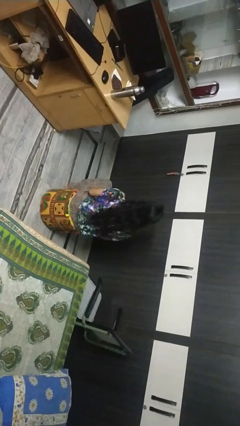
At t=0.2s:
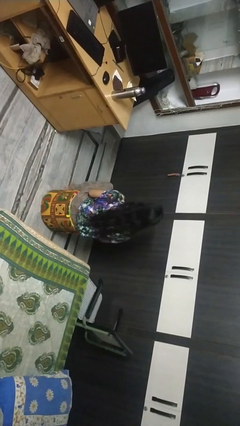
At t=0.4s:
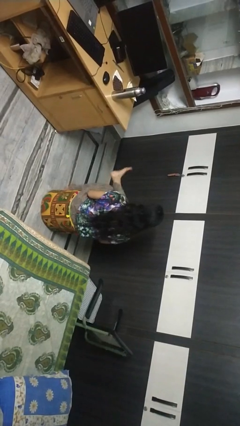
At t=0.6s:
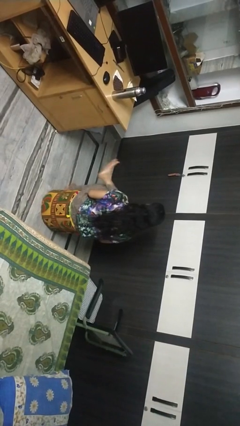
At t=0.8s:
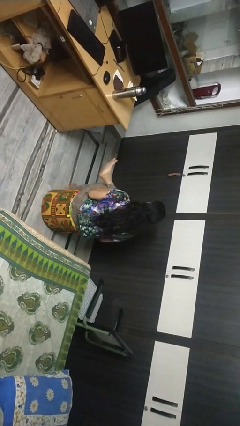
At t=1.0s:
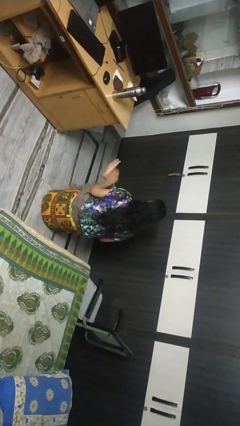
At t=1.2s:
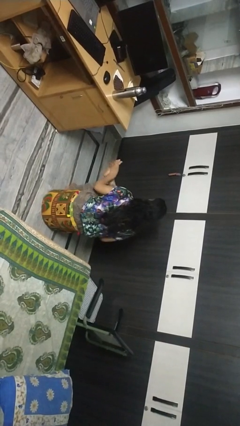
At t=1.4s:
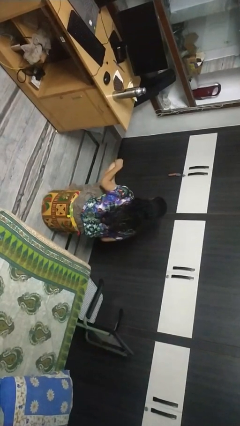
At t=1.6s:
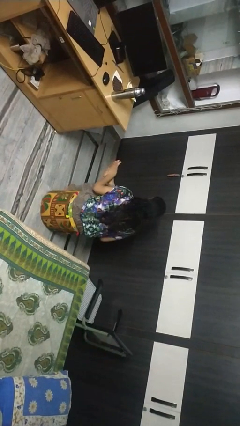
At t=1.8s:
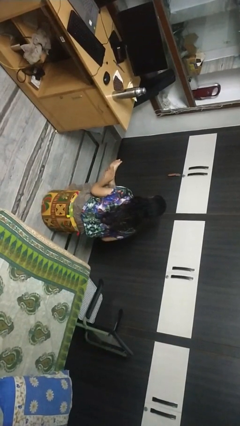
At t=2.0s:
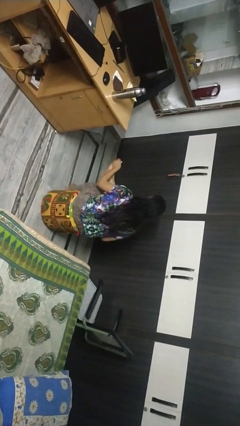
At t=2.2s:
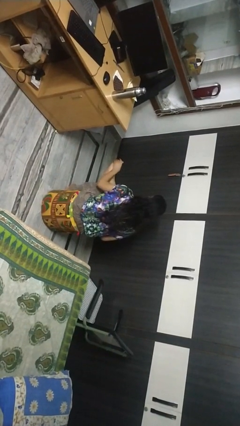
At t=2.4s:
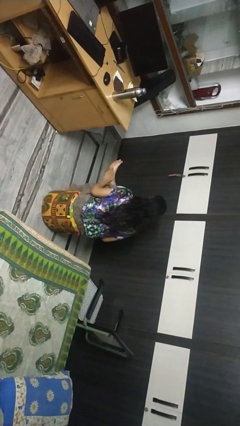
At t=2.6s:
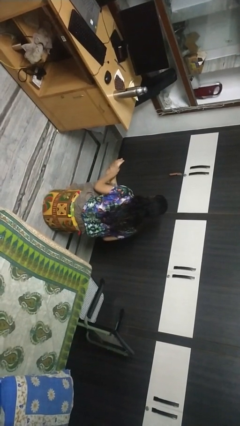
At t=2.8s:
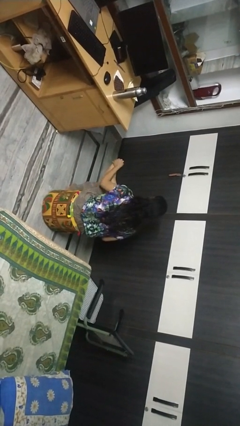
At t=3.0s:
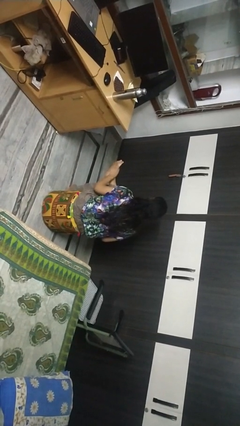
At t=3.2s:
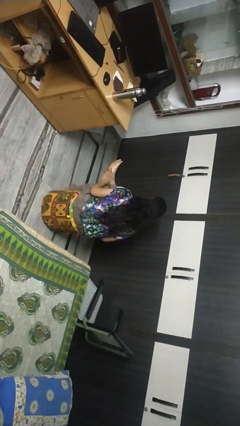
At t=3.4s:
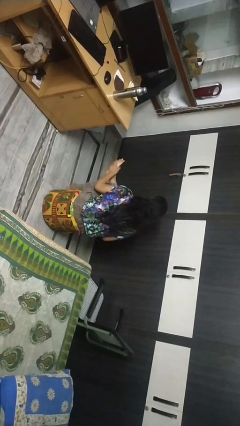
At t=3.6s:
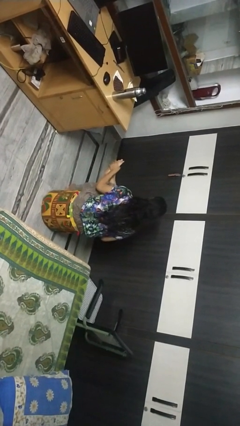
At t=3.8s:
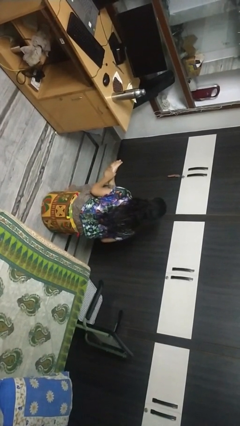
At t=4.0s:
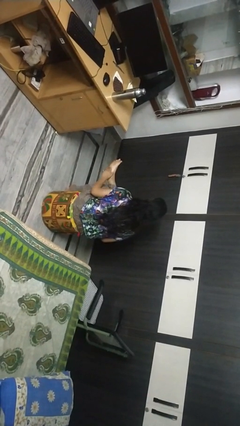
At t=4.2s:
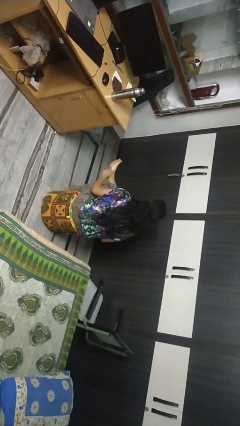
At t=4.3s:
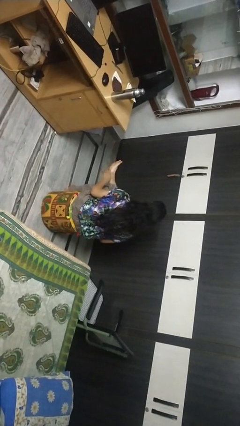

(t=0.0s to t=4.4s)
person rubs foot

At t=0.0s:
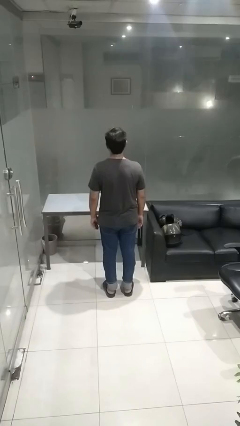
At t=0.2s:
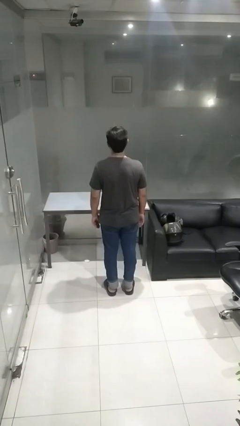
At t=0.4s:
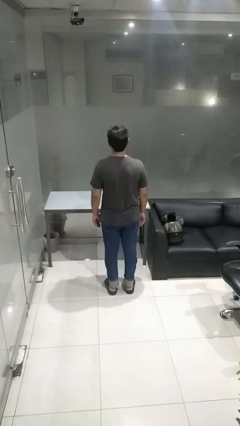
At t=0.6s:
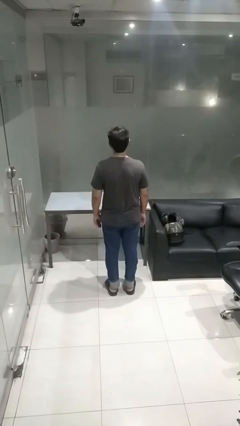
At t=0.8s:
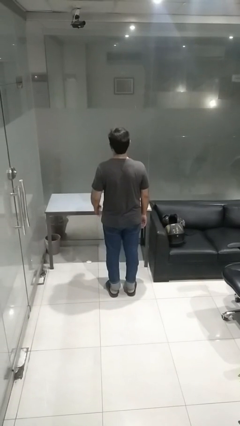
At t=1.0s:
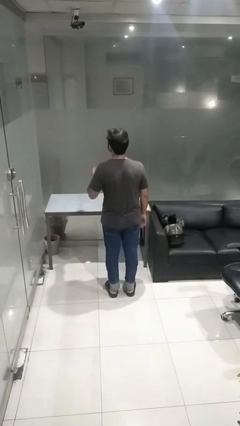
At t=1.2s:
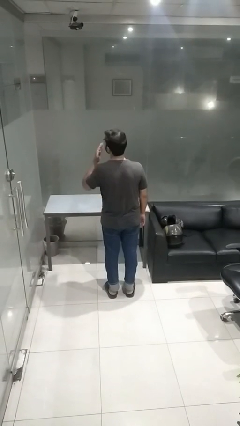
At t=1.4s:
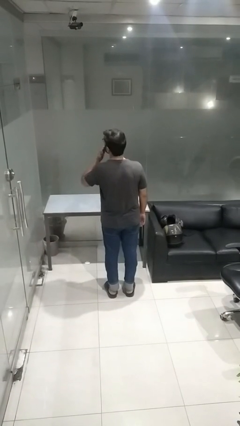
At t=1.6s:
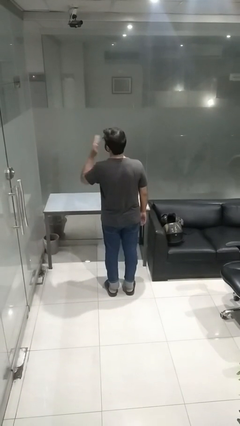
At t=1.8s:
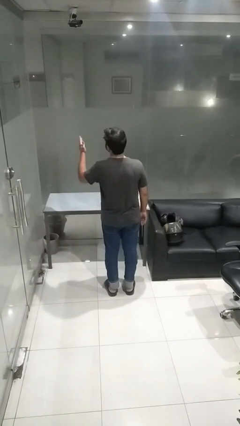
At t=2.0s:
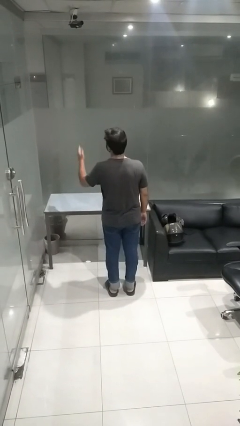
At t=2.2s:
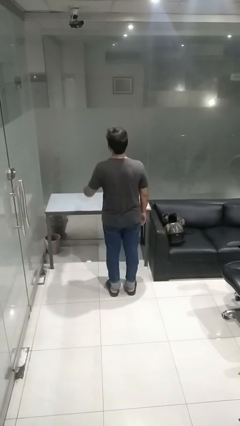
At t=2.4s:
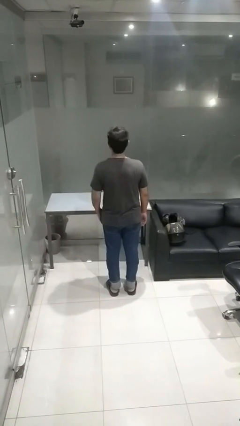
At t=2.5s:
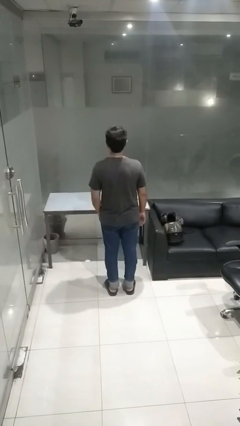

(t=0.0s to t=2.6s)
person gestures blow kiss

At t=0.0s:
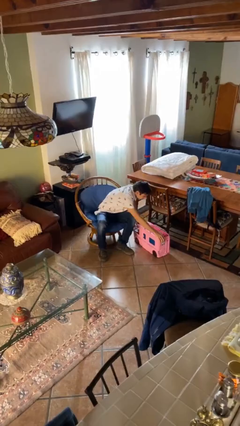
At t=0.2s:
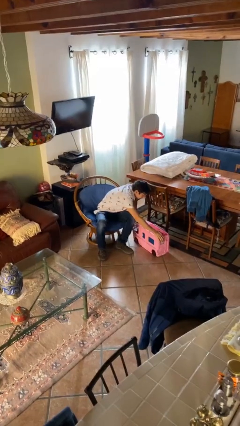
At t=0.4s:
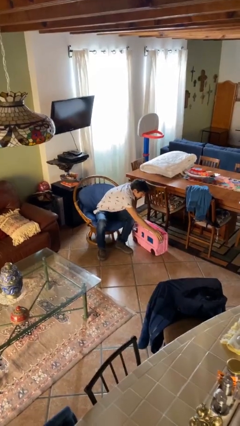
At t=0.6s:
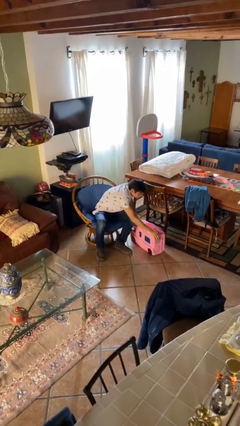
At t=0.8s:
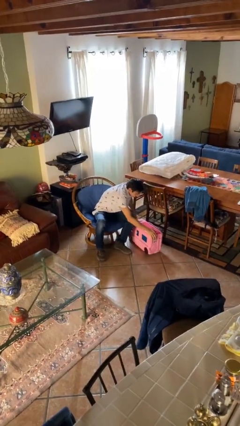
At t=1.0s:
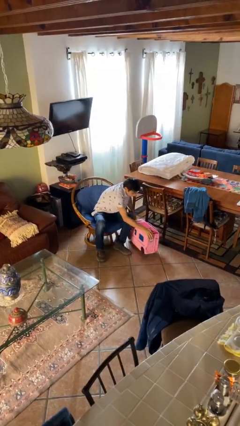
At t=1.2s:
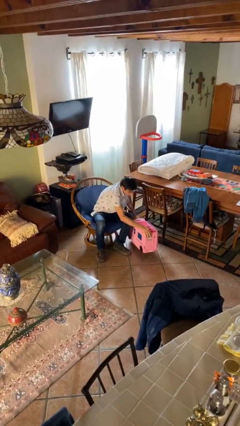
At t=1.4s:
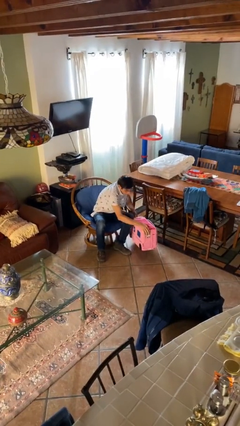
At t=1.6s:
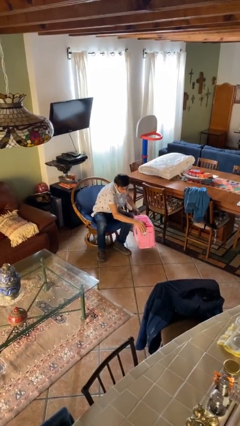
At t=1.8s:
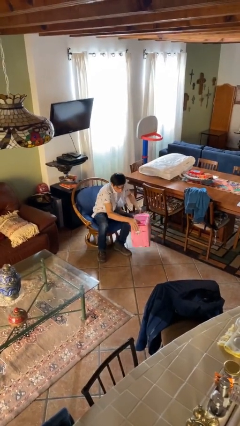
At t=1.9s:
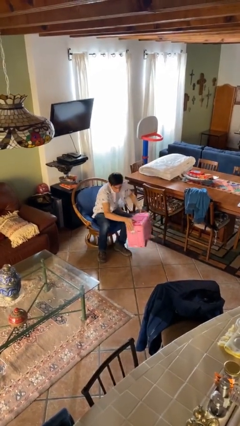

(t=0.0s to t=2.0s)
person picks up object from floor

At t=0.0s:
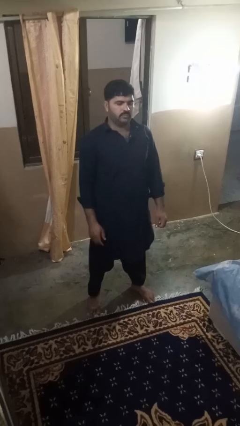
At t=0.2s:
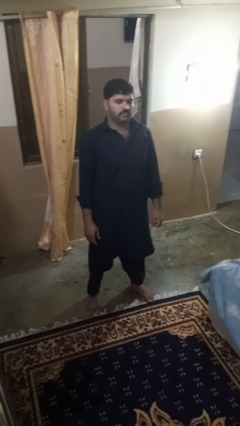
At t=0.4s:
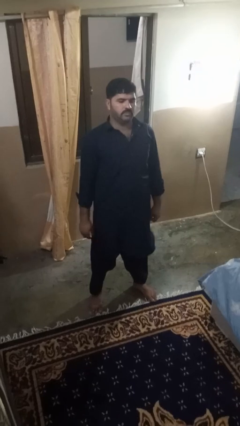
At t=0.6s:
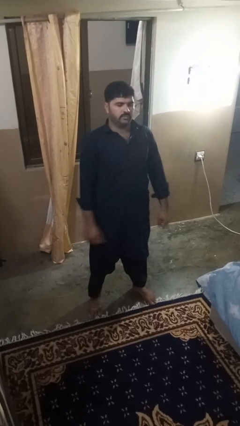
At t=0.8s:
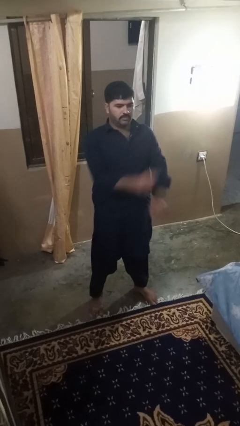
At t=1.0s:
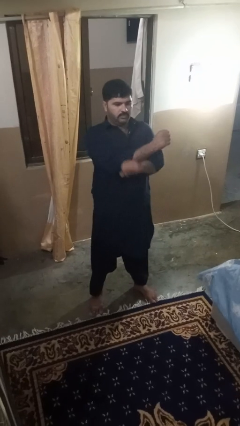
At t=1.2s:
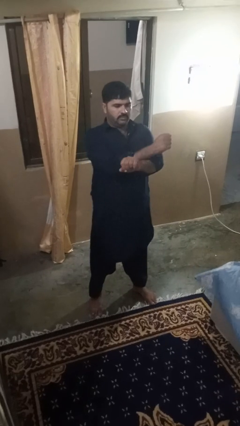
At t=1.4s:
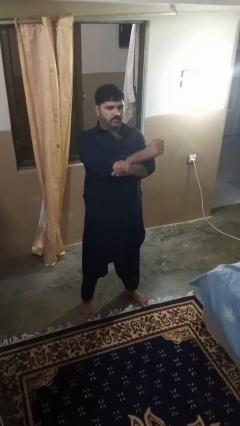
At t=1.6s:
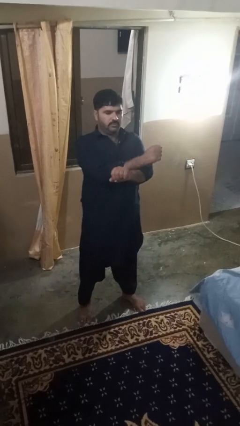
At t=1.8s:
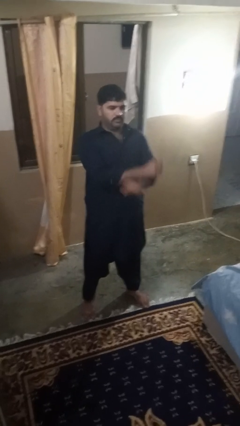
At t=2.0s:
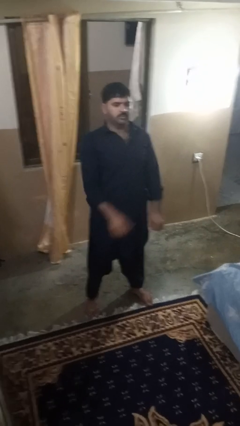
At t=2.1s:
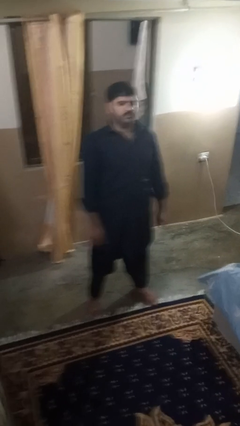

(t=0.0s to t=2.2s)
person crosses arms

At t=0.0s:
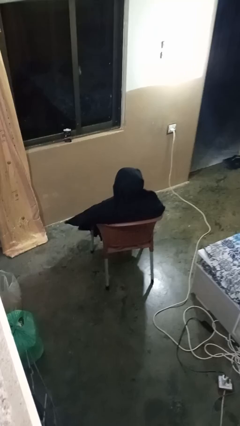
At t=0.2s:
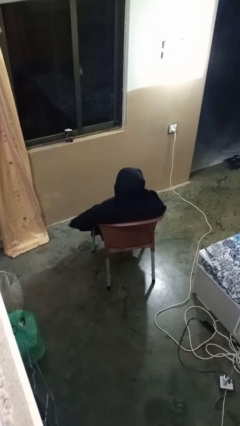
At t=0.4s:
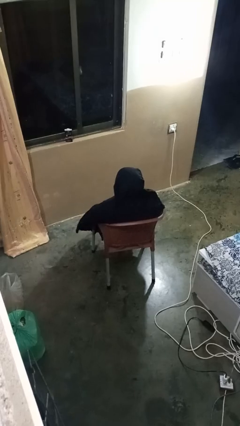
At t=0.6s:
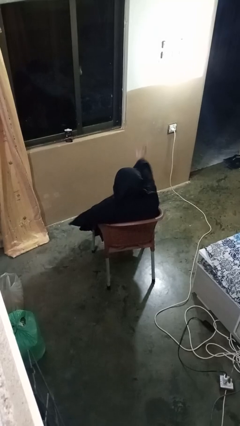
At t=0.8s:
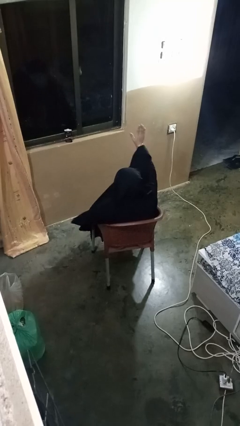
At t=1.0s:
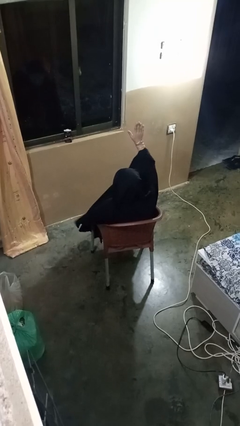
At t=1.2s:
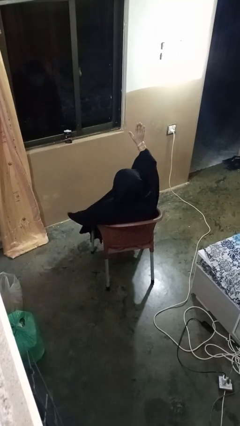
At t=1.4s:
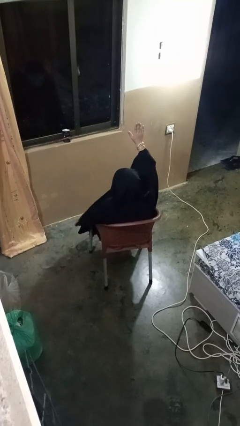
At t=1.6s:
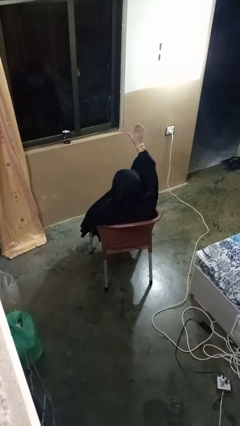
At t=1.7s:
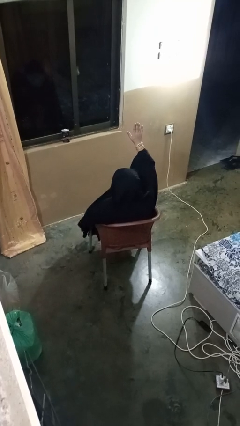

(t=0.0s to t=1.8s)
person gestures raise hand

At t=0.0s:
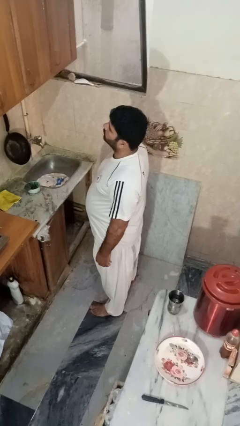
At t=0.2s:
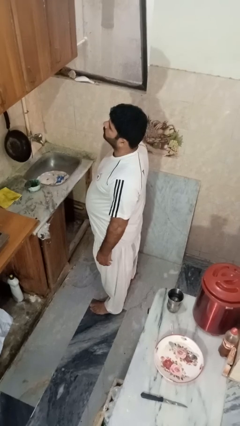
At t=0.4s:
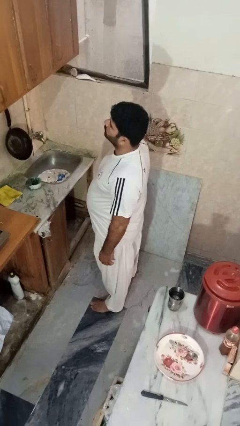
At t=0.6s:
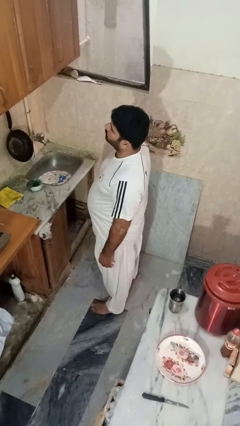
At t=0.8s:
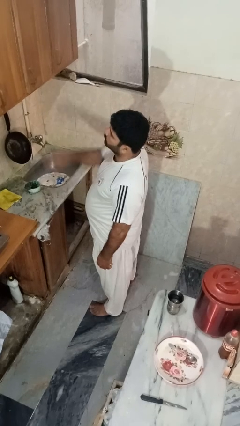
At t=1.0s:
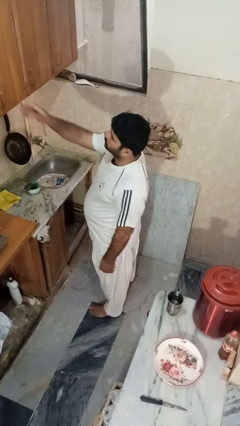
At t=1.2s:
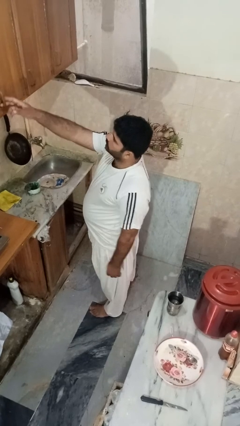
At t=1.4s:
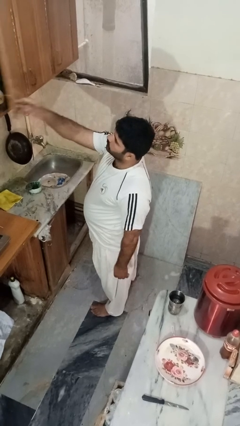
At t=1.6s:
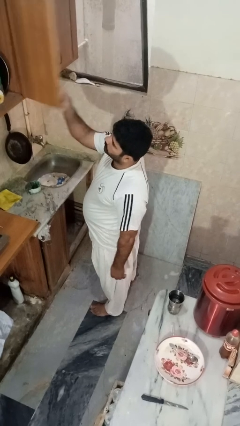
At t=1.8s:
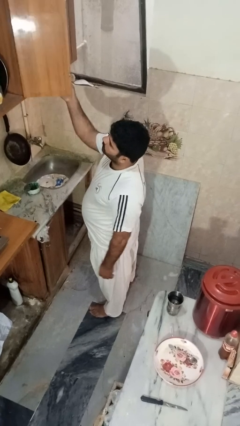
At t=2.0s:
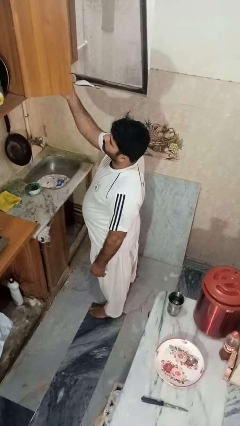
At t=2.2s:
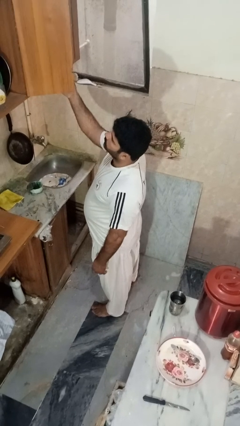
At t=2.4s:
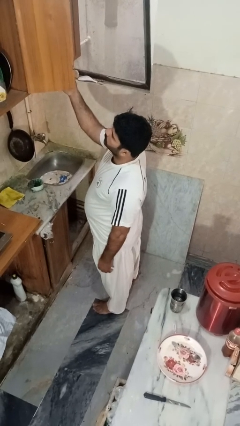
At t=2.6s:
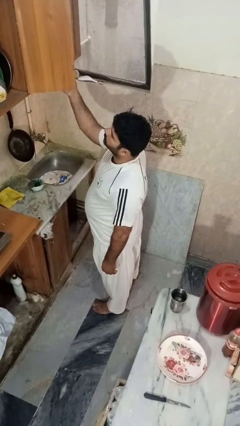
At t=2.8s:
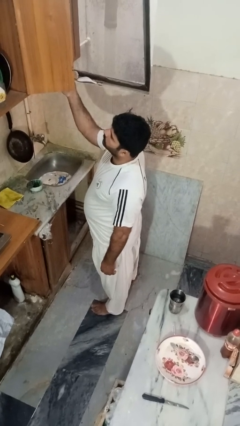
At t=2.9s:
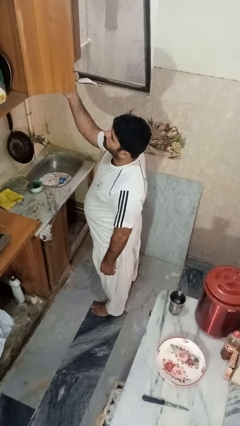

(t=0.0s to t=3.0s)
person opens cabinet

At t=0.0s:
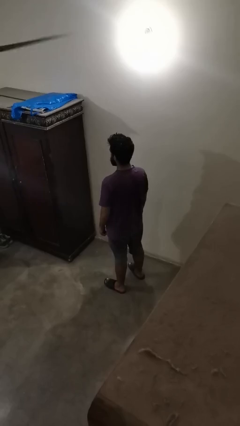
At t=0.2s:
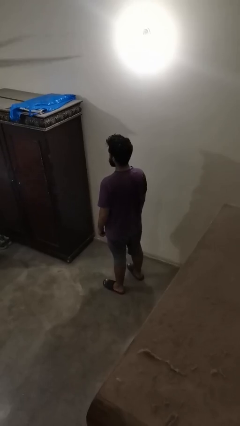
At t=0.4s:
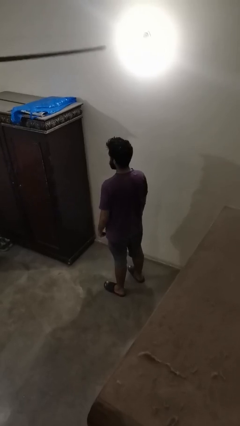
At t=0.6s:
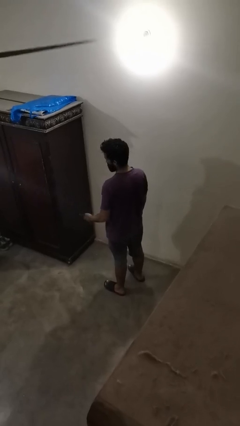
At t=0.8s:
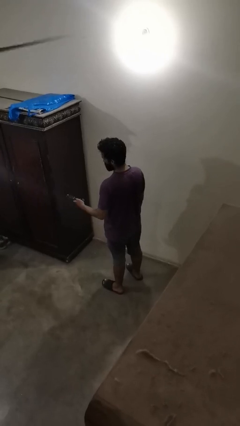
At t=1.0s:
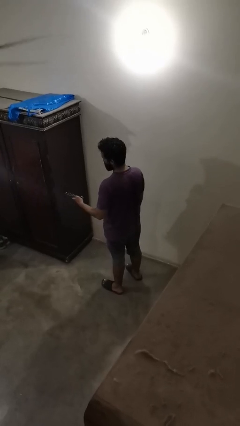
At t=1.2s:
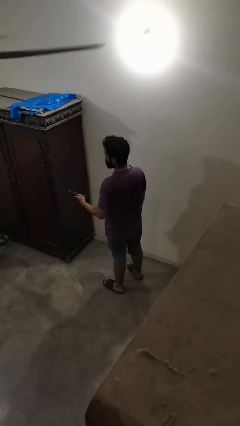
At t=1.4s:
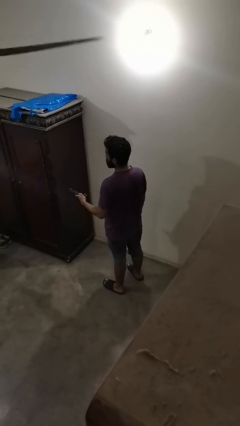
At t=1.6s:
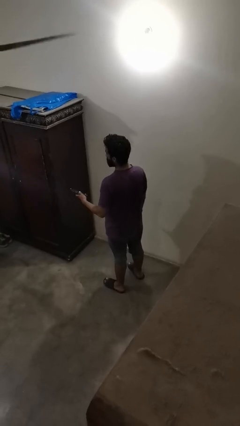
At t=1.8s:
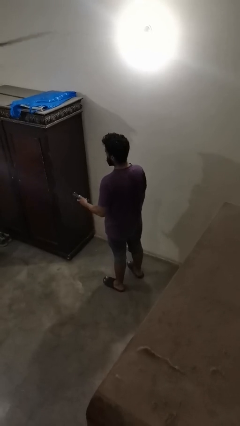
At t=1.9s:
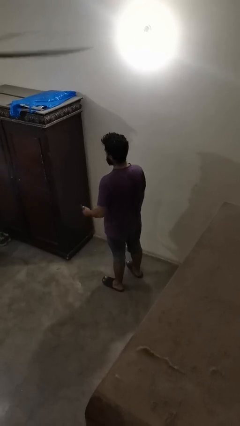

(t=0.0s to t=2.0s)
person uses television remote
